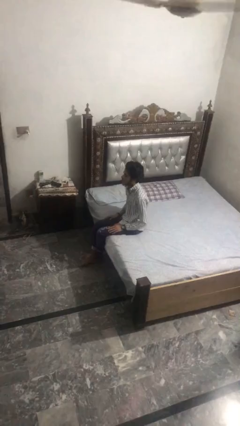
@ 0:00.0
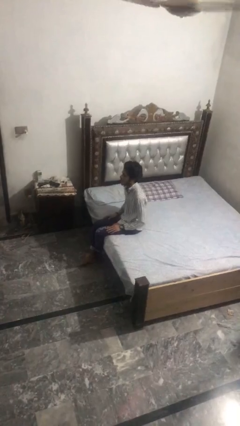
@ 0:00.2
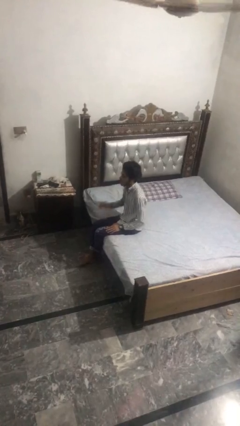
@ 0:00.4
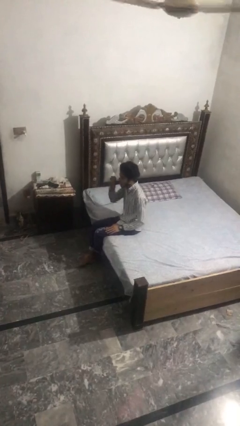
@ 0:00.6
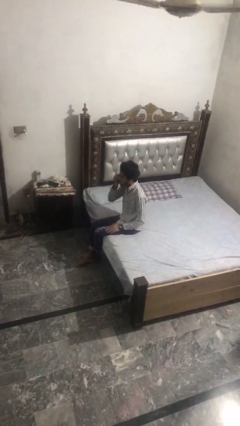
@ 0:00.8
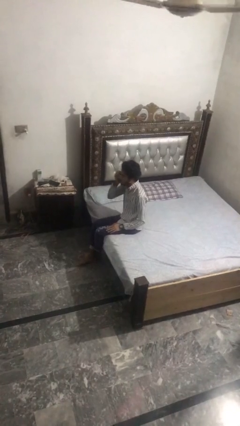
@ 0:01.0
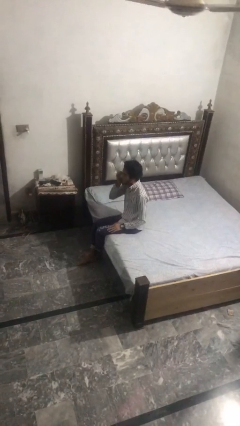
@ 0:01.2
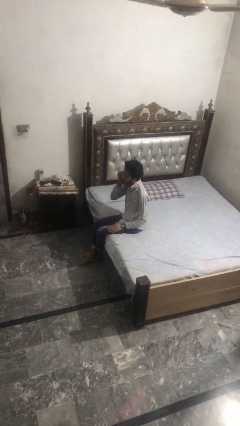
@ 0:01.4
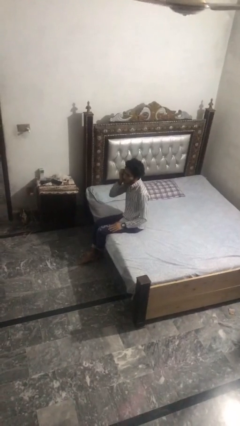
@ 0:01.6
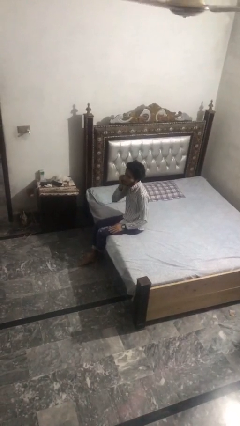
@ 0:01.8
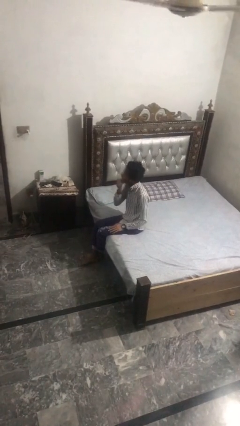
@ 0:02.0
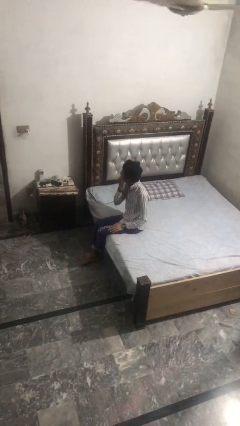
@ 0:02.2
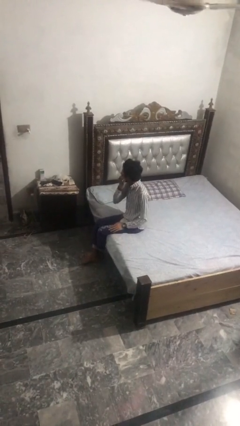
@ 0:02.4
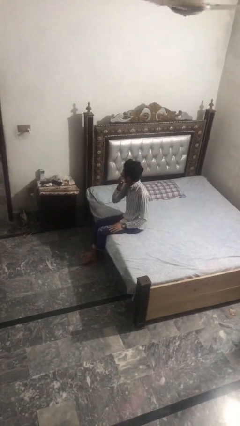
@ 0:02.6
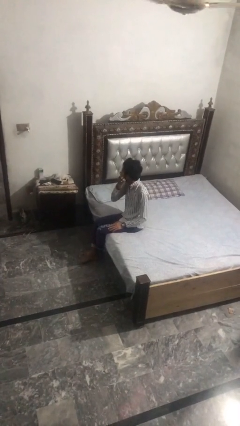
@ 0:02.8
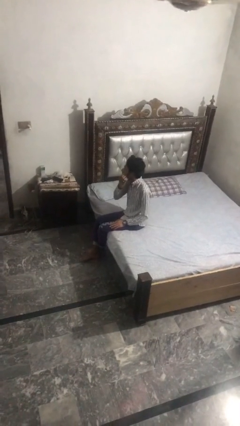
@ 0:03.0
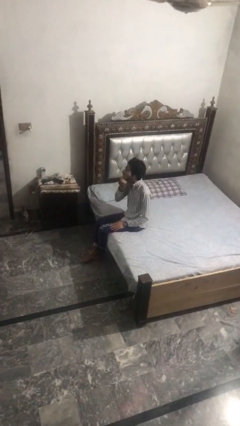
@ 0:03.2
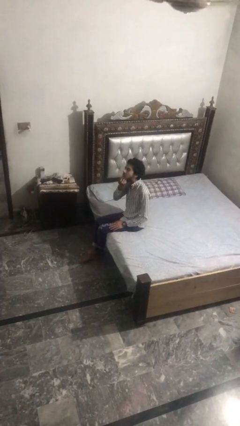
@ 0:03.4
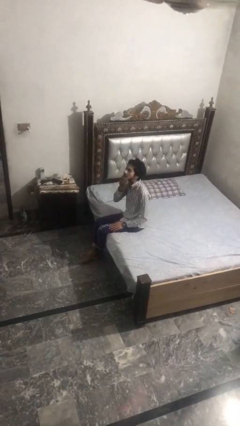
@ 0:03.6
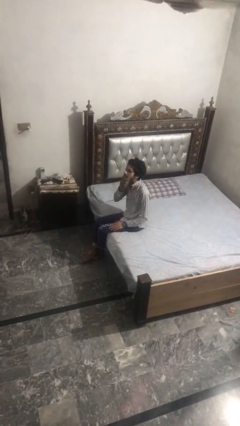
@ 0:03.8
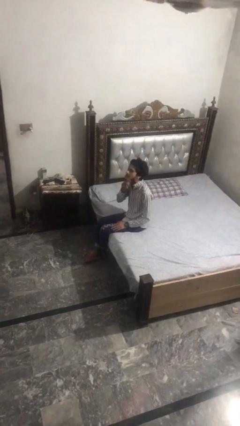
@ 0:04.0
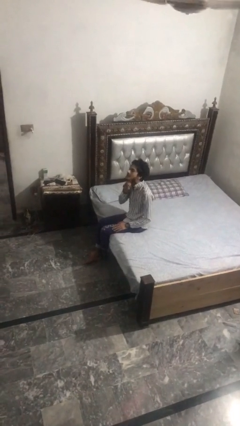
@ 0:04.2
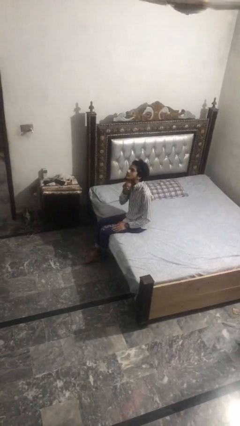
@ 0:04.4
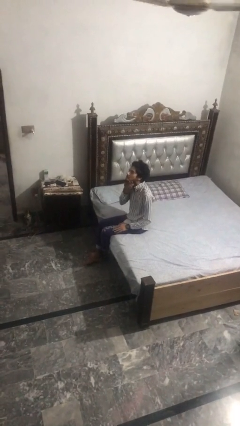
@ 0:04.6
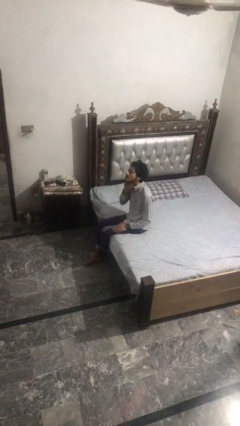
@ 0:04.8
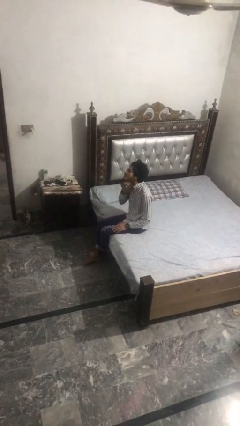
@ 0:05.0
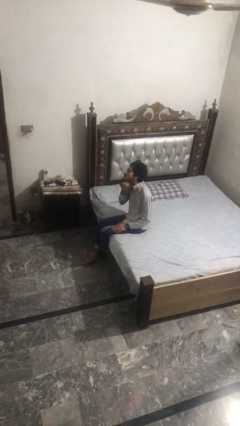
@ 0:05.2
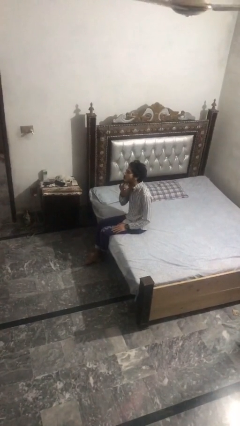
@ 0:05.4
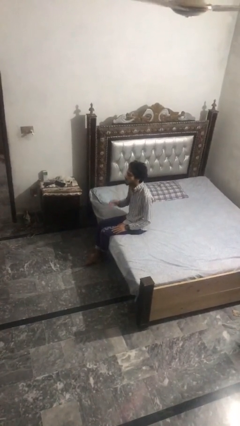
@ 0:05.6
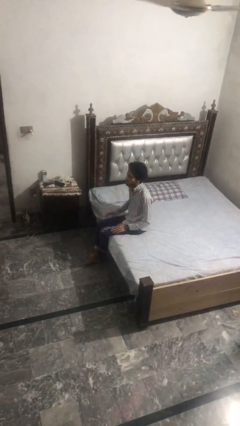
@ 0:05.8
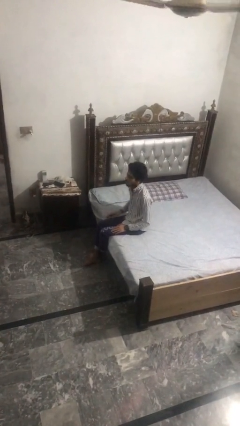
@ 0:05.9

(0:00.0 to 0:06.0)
person scratches face

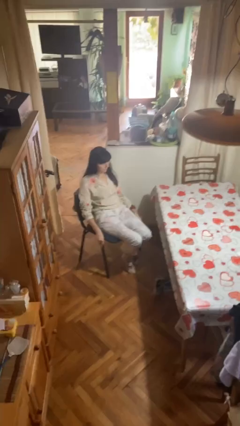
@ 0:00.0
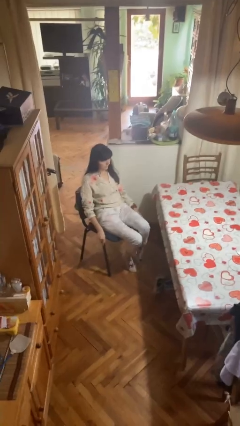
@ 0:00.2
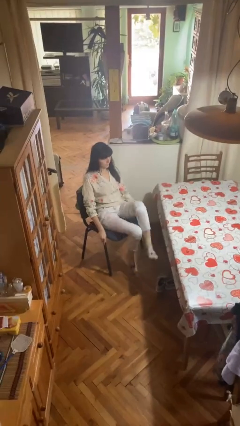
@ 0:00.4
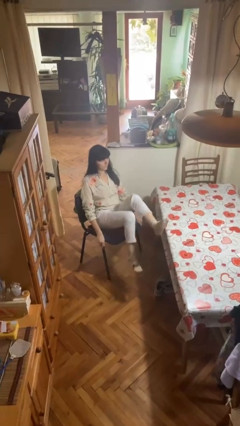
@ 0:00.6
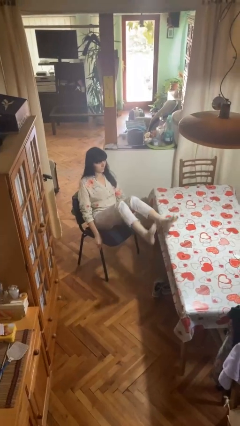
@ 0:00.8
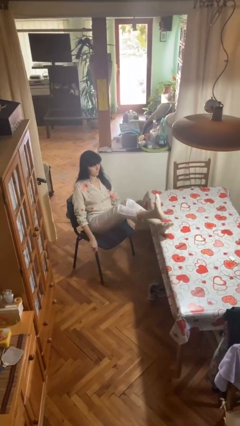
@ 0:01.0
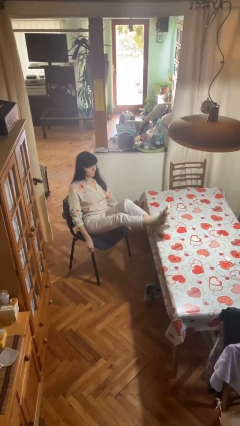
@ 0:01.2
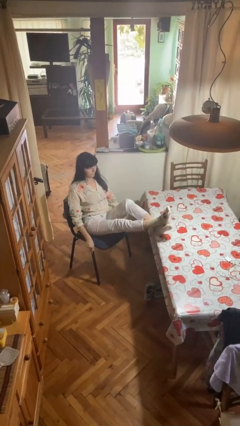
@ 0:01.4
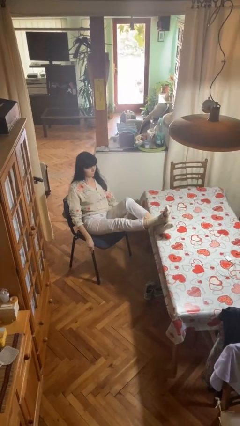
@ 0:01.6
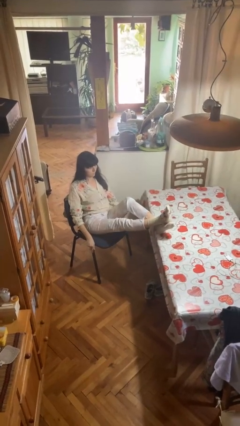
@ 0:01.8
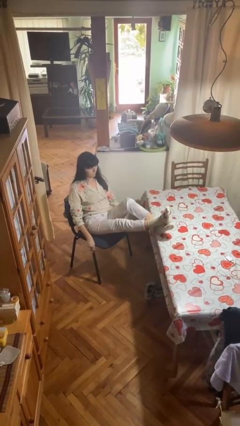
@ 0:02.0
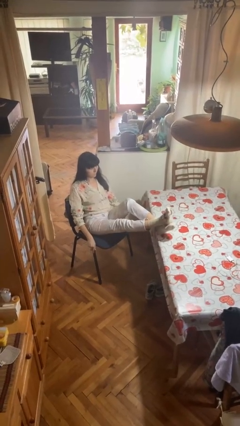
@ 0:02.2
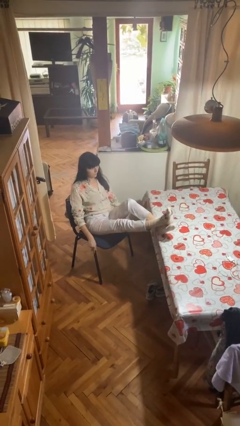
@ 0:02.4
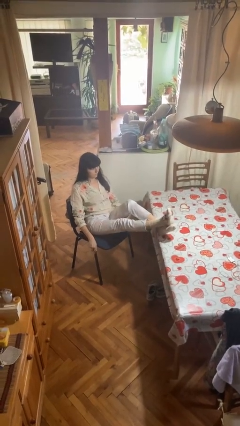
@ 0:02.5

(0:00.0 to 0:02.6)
person puts feet up

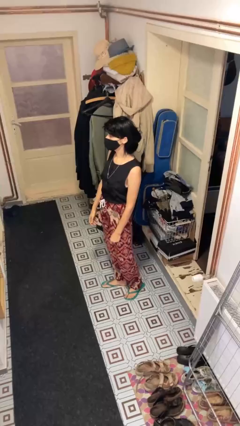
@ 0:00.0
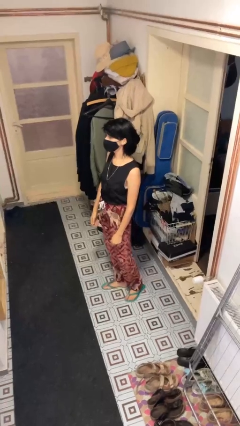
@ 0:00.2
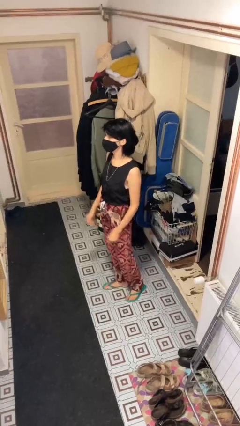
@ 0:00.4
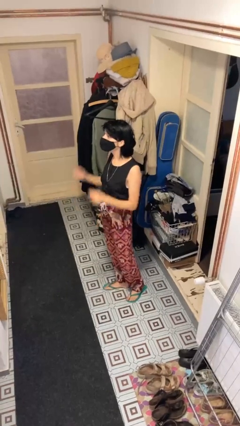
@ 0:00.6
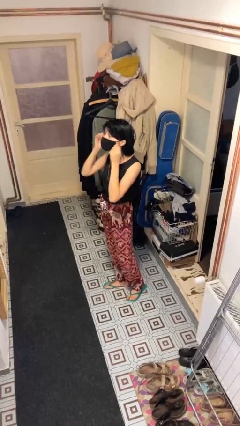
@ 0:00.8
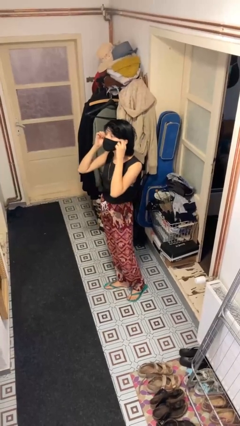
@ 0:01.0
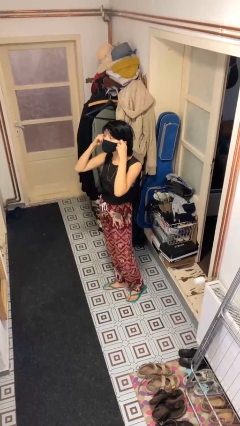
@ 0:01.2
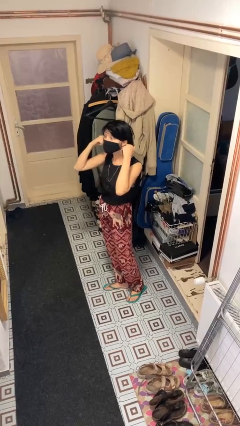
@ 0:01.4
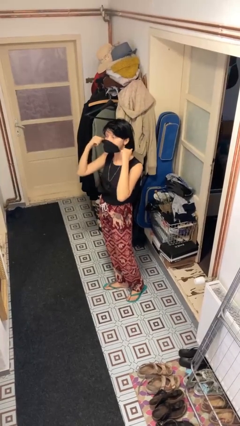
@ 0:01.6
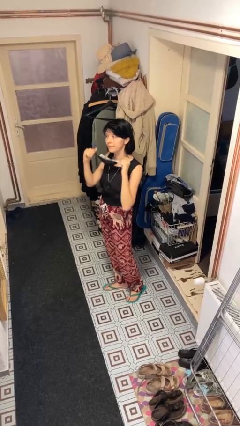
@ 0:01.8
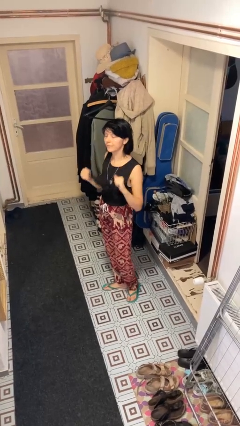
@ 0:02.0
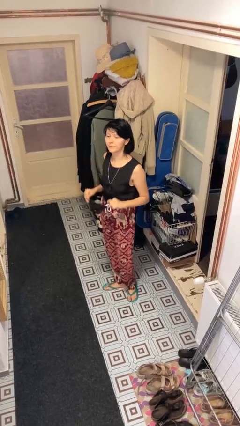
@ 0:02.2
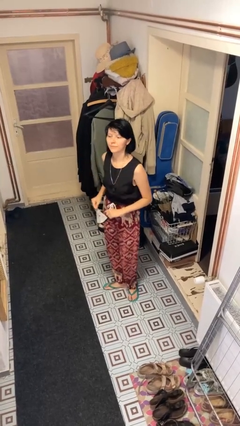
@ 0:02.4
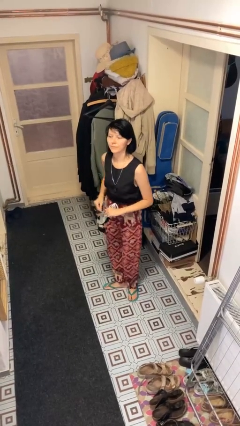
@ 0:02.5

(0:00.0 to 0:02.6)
person takes off facemask

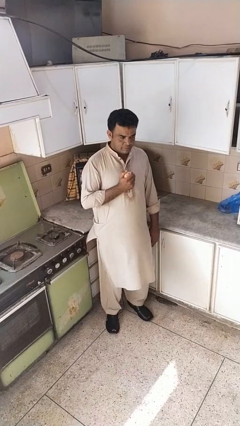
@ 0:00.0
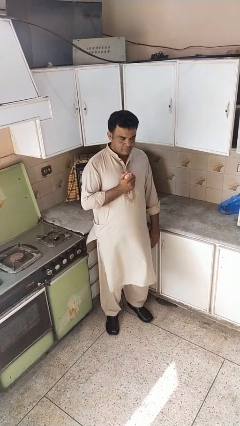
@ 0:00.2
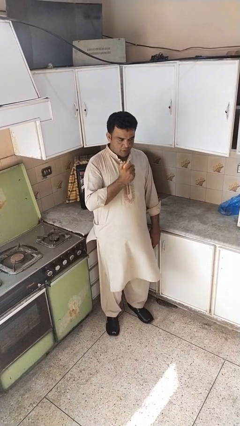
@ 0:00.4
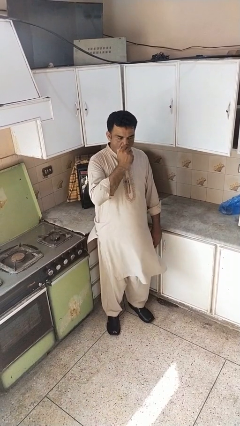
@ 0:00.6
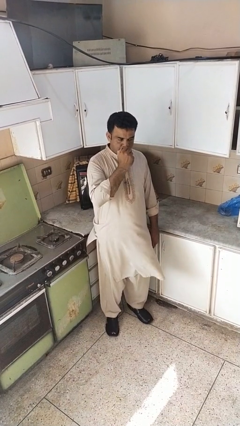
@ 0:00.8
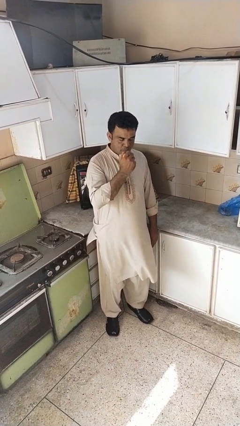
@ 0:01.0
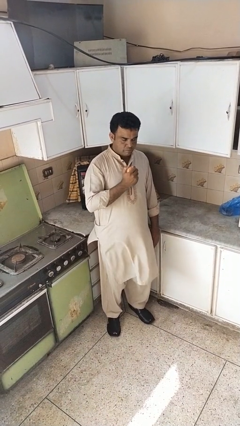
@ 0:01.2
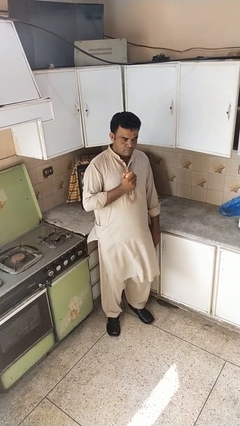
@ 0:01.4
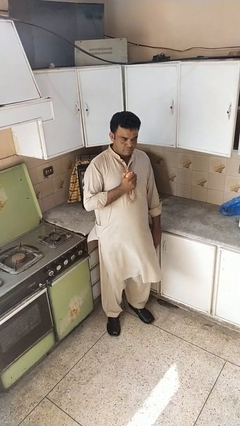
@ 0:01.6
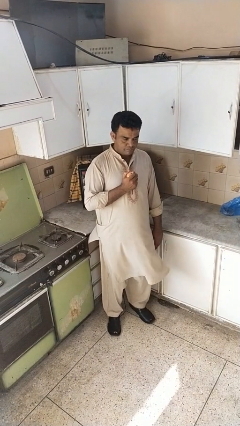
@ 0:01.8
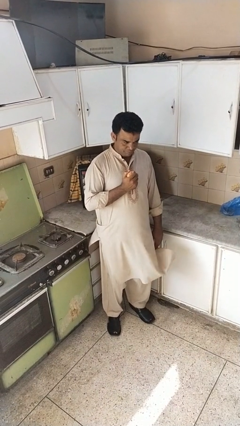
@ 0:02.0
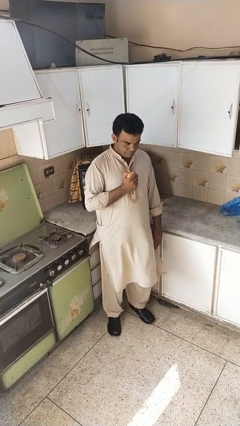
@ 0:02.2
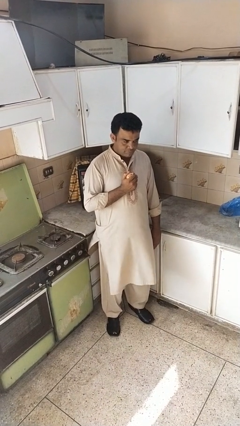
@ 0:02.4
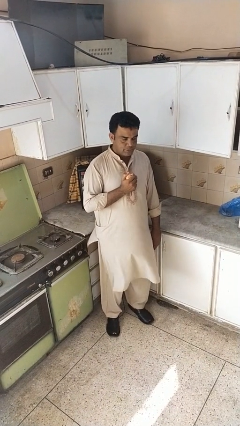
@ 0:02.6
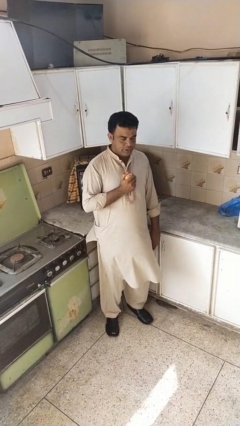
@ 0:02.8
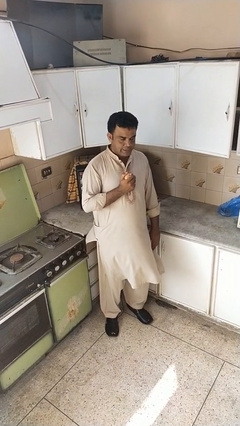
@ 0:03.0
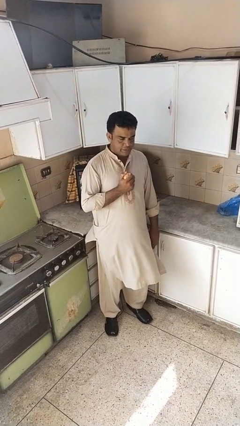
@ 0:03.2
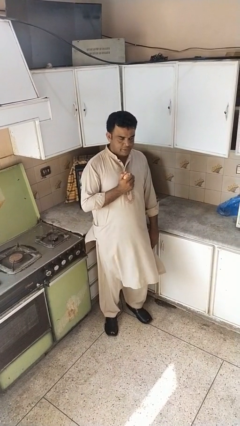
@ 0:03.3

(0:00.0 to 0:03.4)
person eats apple

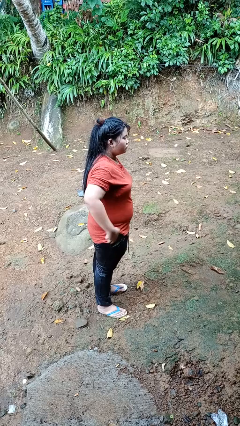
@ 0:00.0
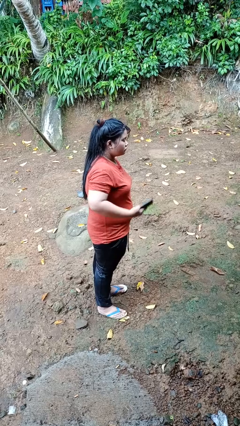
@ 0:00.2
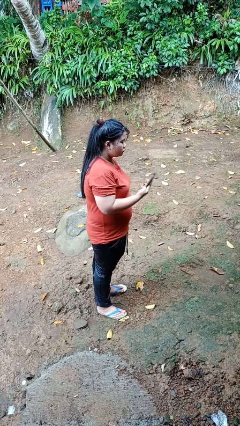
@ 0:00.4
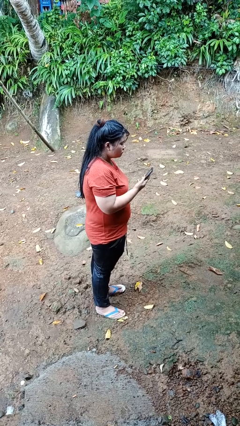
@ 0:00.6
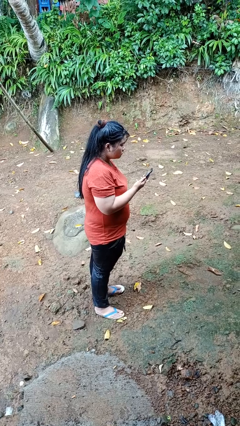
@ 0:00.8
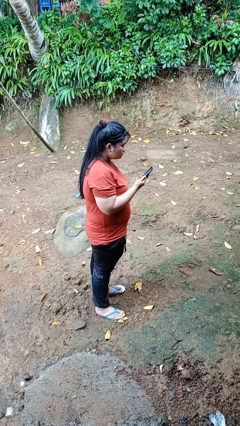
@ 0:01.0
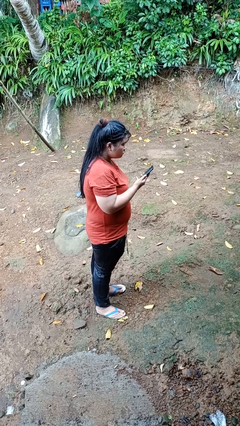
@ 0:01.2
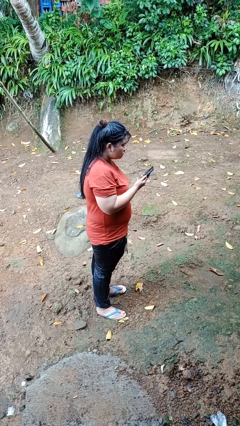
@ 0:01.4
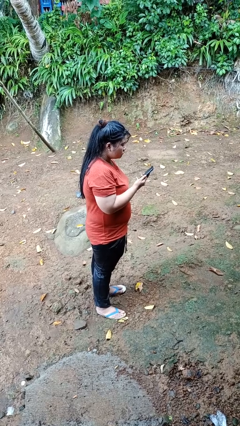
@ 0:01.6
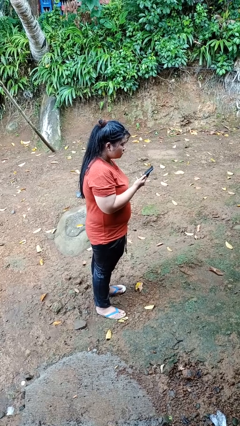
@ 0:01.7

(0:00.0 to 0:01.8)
person takes phone from pocket

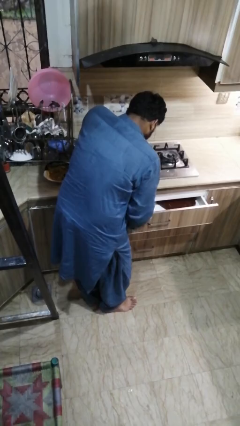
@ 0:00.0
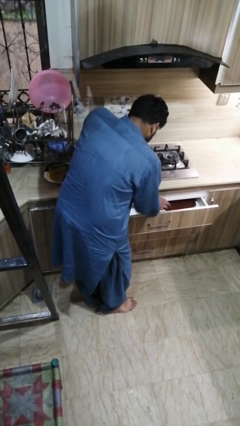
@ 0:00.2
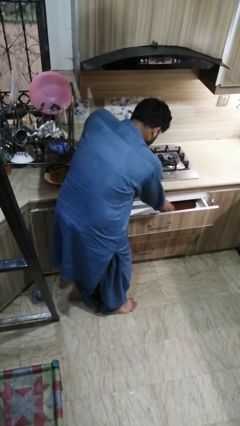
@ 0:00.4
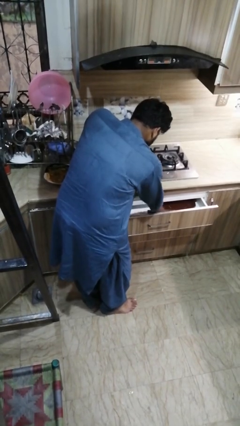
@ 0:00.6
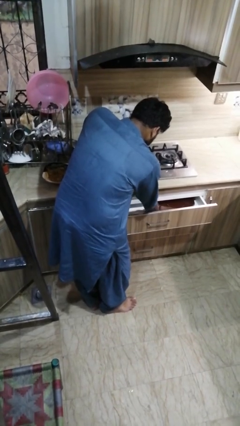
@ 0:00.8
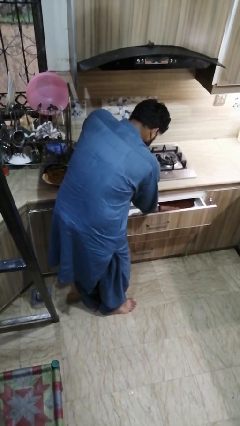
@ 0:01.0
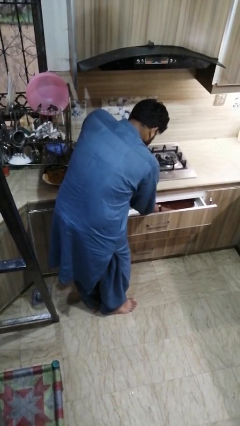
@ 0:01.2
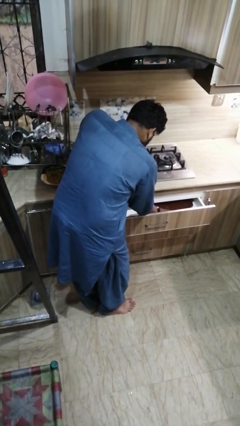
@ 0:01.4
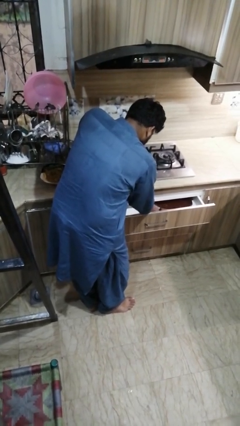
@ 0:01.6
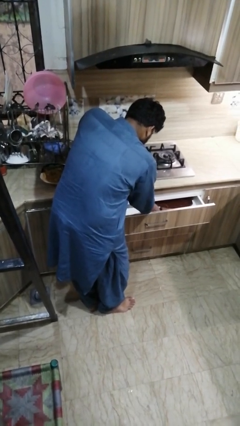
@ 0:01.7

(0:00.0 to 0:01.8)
person searches in kitchen drawer
